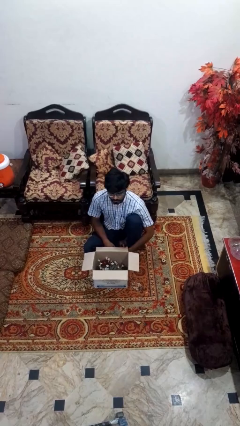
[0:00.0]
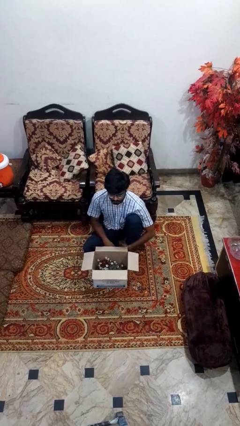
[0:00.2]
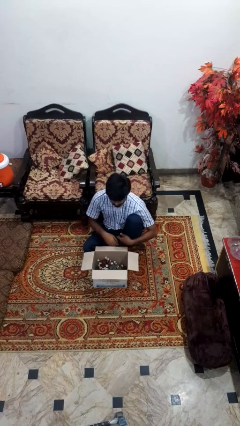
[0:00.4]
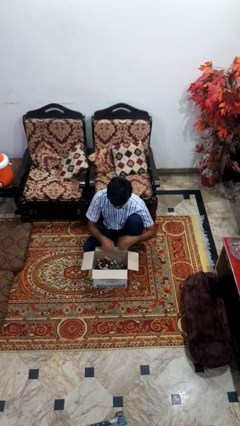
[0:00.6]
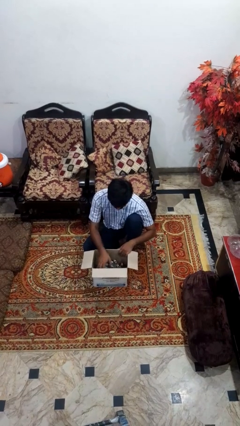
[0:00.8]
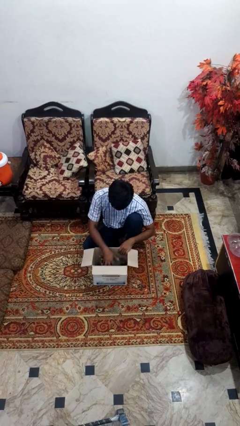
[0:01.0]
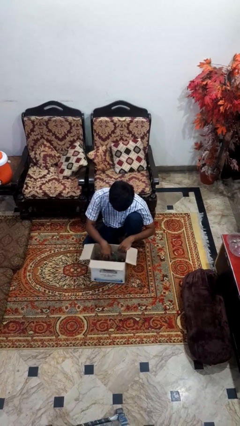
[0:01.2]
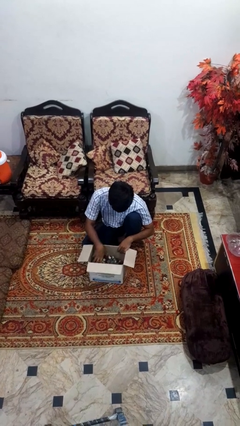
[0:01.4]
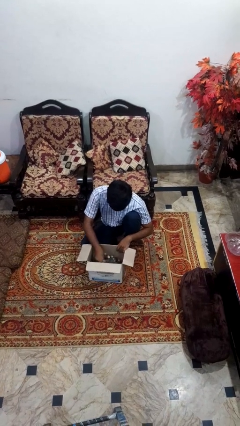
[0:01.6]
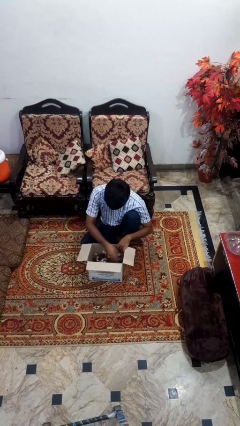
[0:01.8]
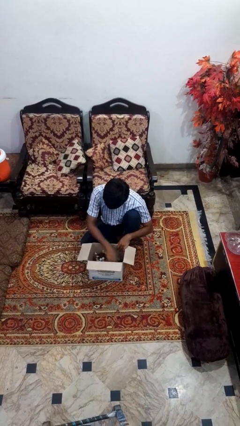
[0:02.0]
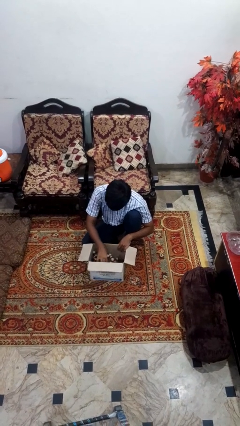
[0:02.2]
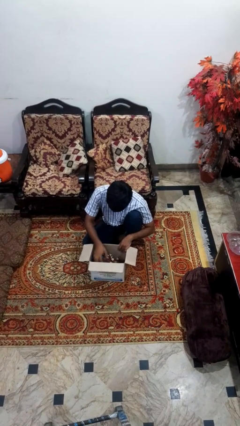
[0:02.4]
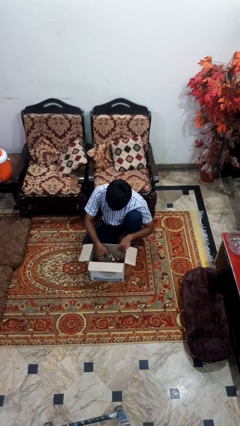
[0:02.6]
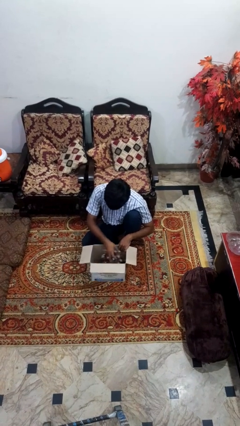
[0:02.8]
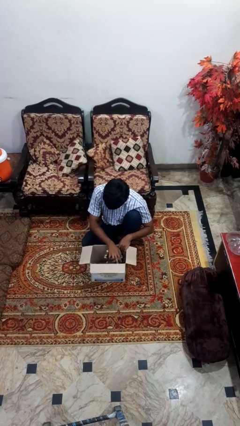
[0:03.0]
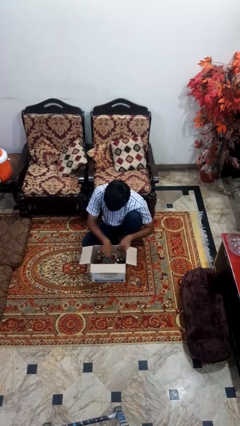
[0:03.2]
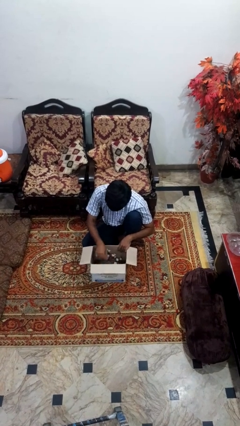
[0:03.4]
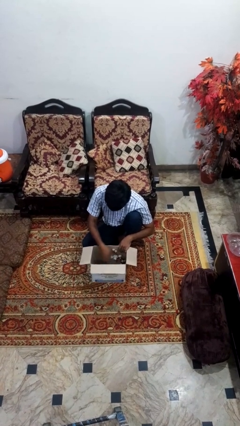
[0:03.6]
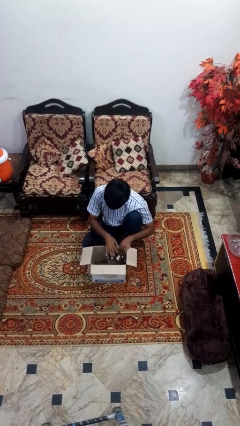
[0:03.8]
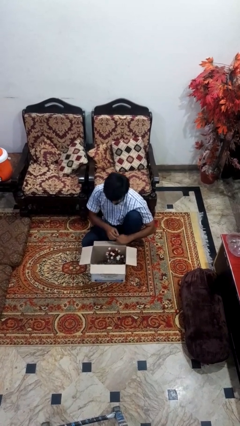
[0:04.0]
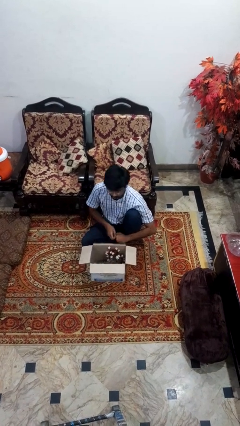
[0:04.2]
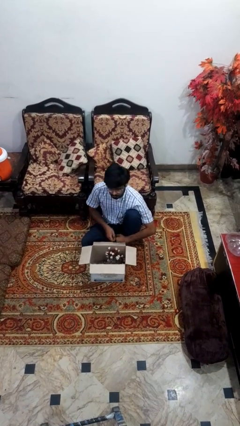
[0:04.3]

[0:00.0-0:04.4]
person searches in box

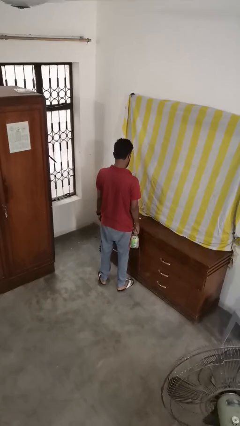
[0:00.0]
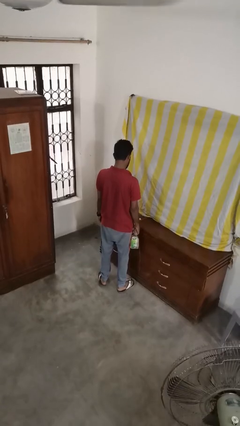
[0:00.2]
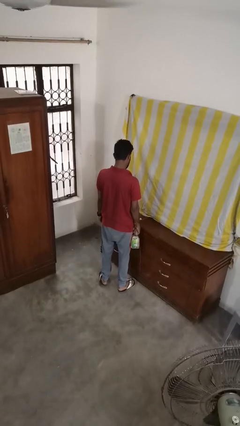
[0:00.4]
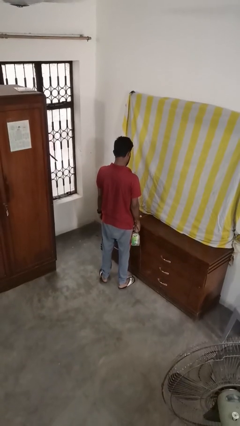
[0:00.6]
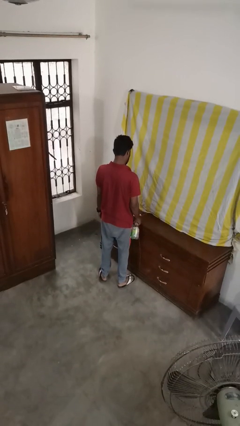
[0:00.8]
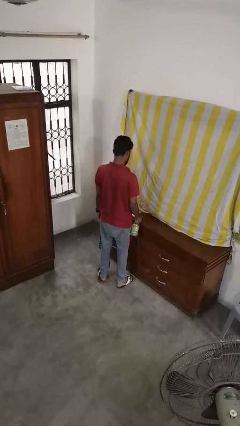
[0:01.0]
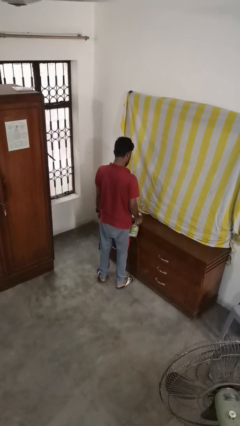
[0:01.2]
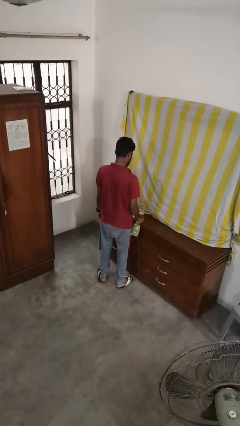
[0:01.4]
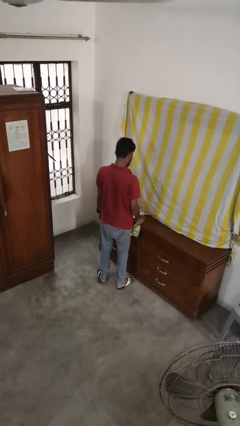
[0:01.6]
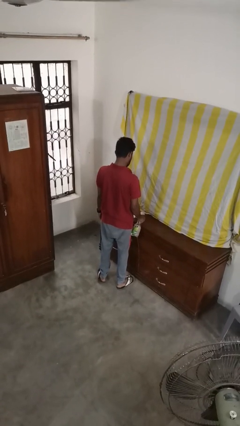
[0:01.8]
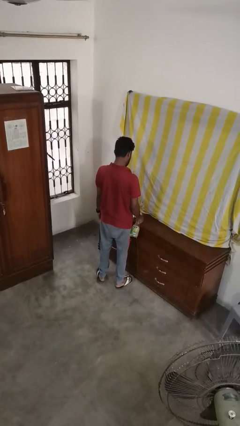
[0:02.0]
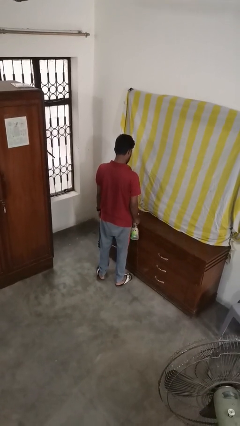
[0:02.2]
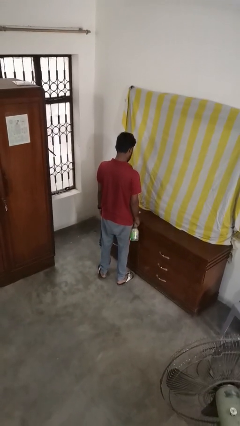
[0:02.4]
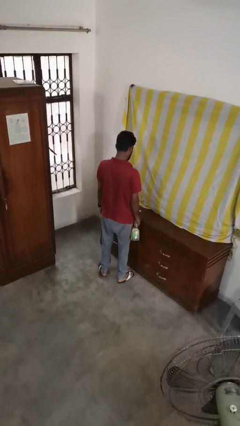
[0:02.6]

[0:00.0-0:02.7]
person sprays from bottle

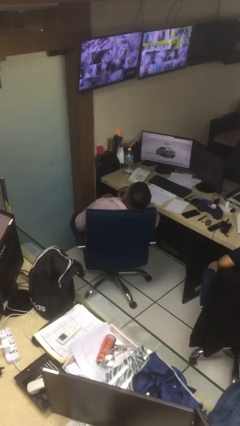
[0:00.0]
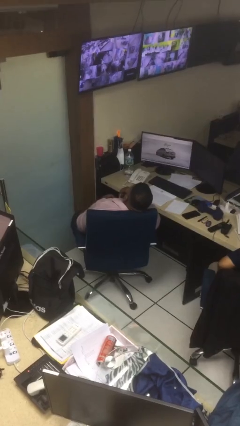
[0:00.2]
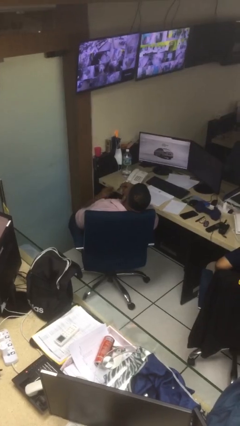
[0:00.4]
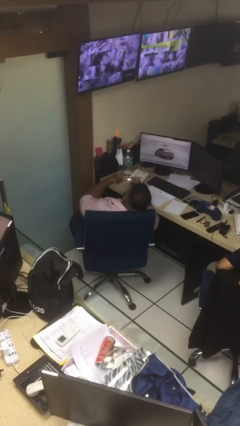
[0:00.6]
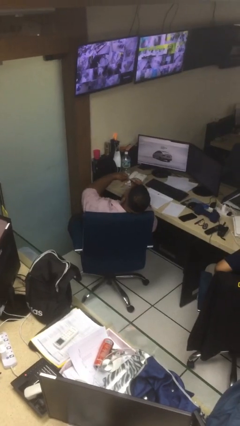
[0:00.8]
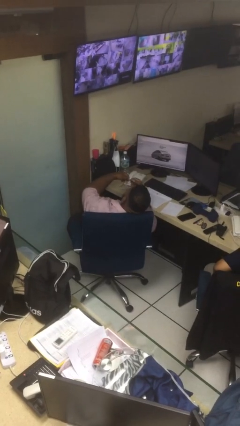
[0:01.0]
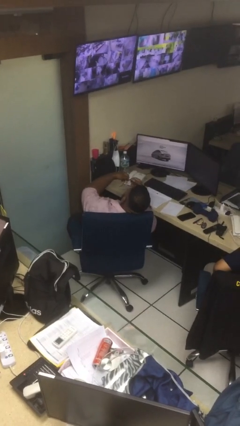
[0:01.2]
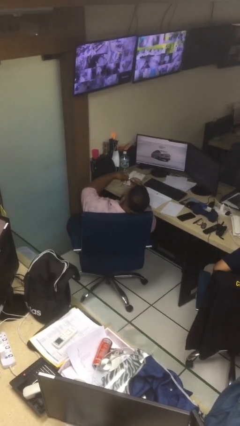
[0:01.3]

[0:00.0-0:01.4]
person clips fingernails

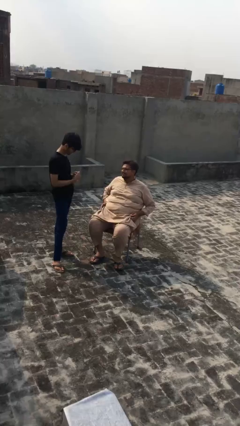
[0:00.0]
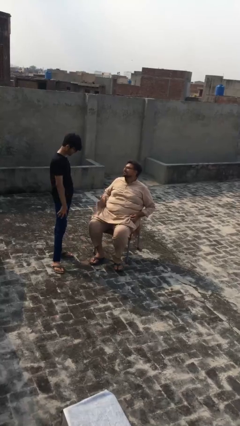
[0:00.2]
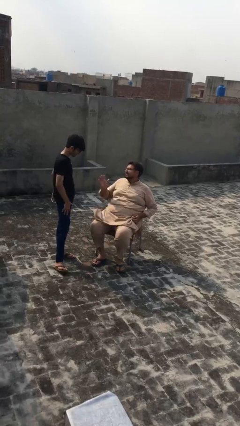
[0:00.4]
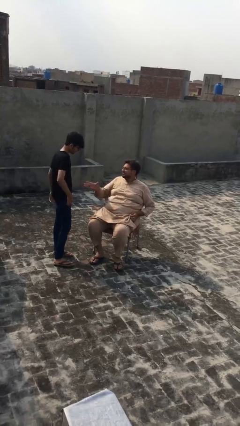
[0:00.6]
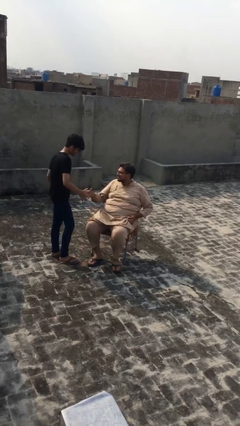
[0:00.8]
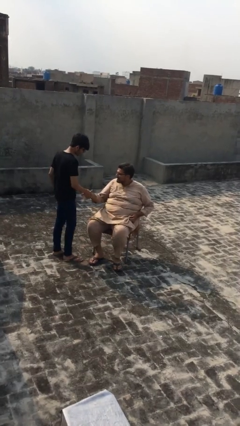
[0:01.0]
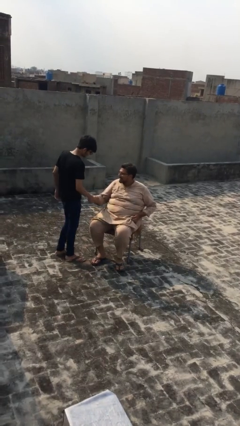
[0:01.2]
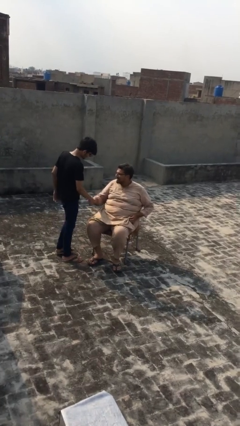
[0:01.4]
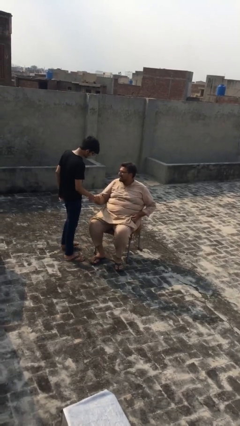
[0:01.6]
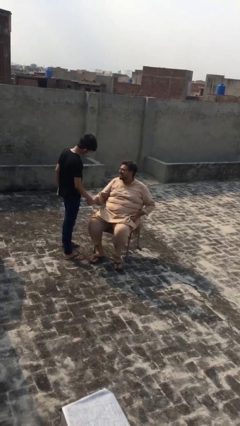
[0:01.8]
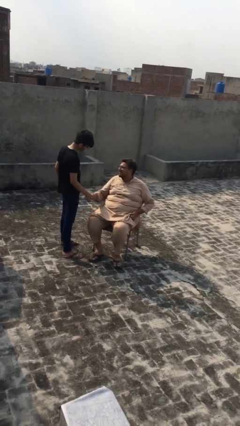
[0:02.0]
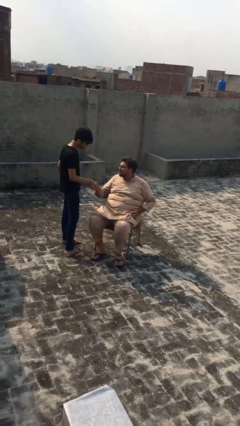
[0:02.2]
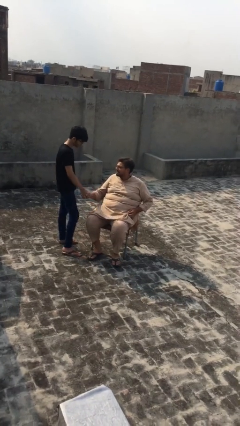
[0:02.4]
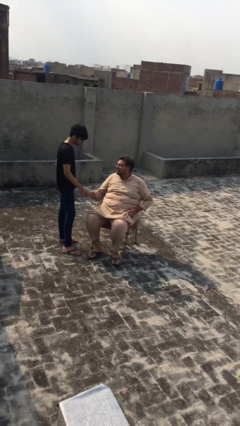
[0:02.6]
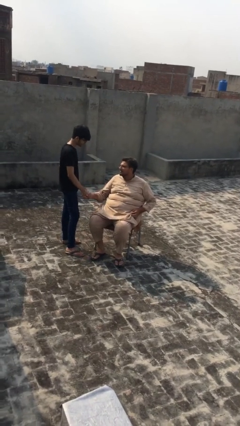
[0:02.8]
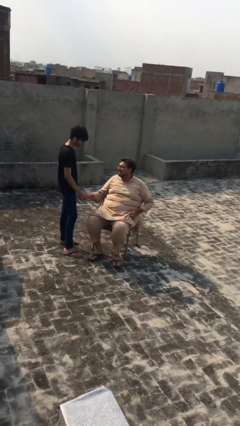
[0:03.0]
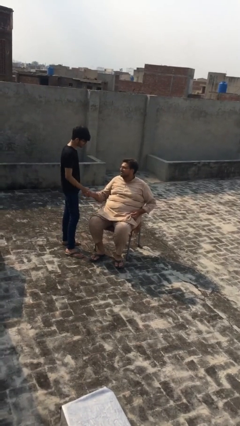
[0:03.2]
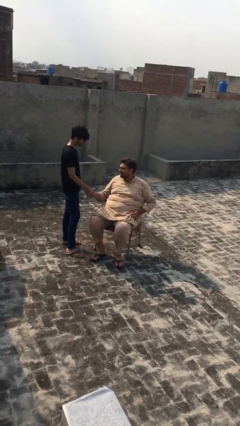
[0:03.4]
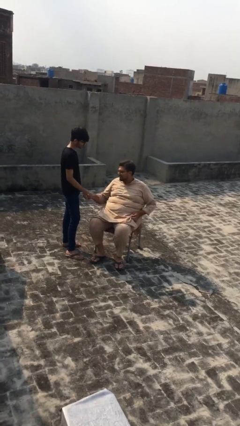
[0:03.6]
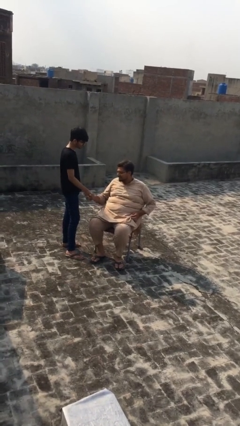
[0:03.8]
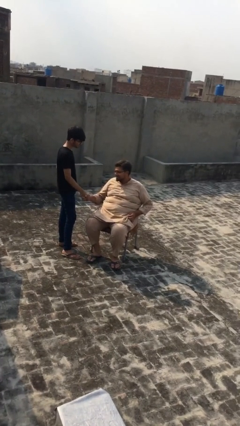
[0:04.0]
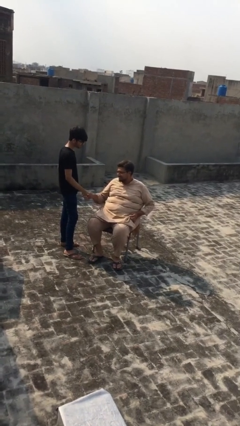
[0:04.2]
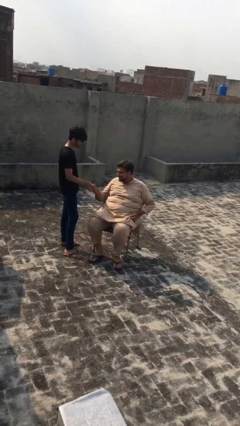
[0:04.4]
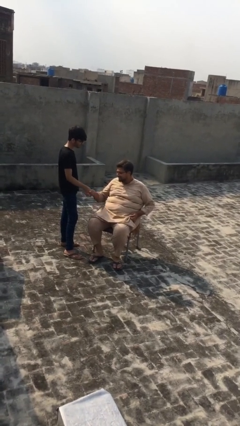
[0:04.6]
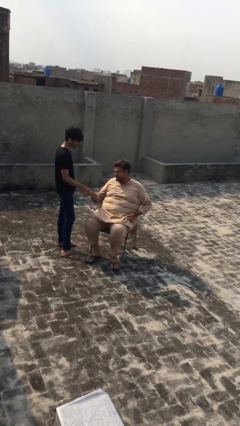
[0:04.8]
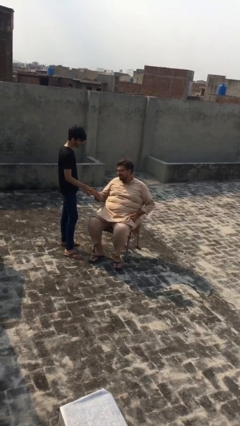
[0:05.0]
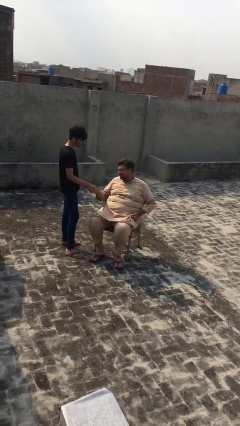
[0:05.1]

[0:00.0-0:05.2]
person shakes hand

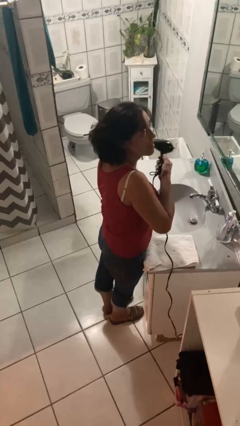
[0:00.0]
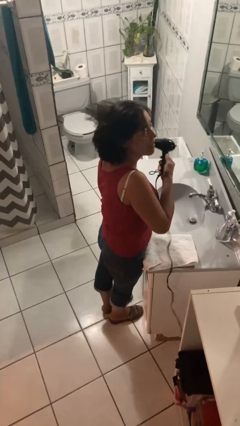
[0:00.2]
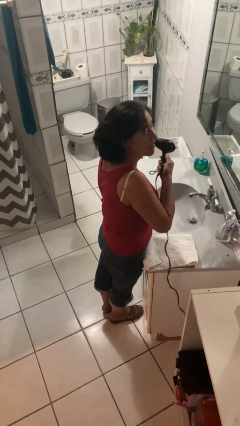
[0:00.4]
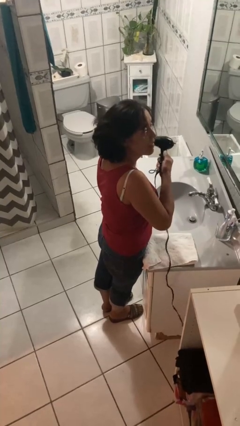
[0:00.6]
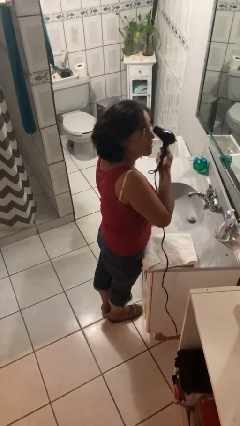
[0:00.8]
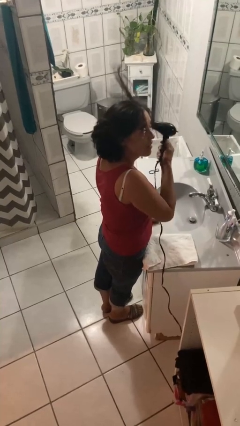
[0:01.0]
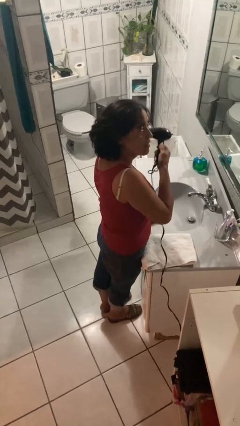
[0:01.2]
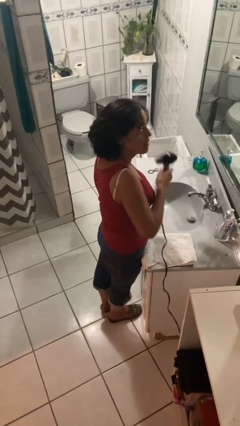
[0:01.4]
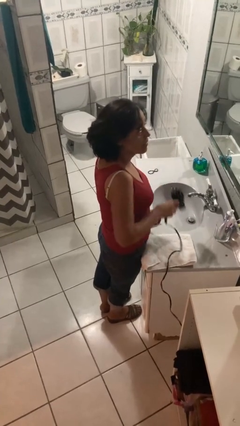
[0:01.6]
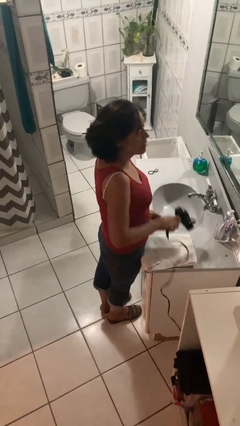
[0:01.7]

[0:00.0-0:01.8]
person dries hair with hairdryer

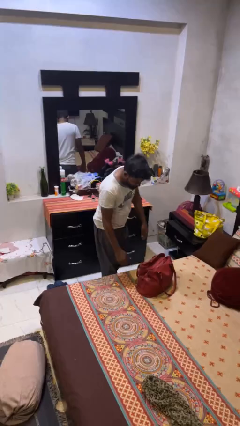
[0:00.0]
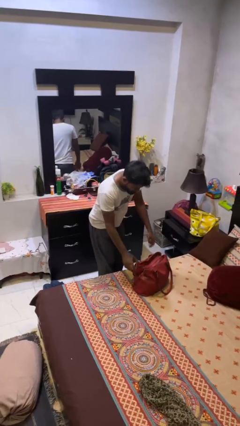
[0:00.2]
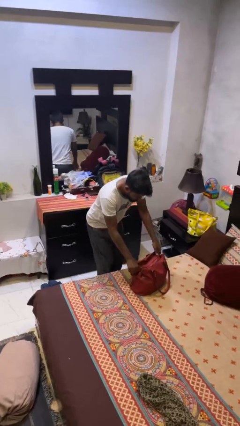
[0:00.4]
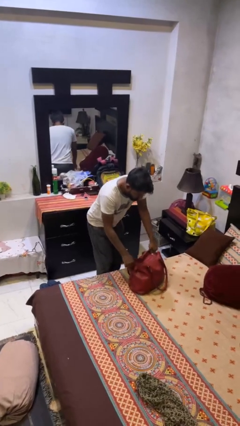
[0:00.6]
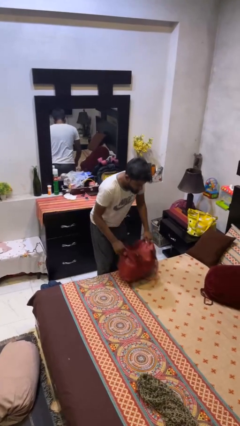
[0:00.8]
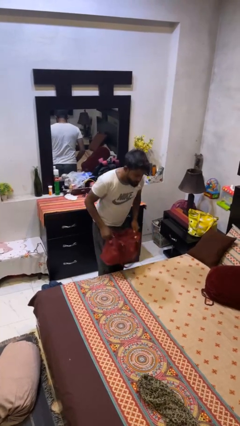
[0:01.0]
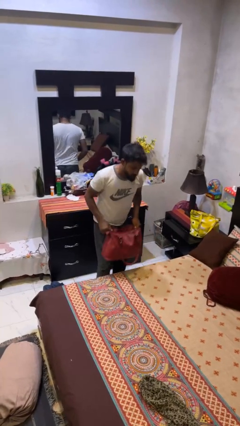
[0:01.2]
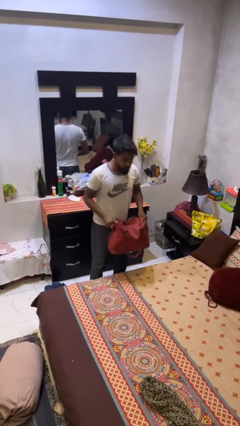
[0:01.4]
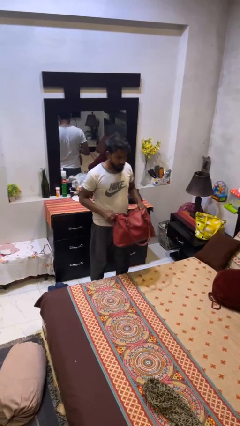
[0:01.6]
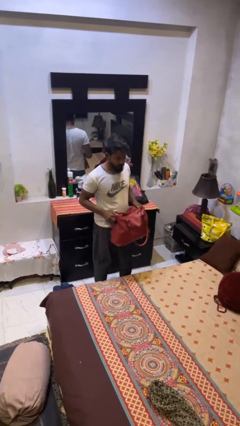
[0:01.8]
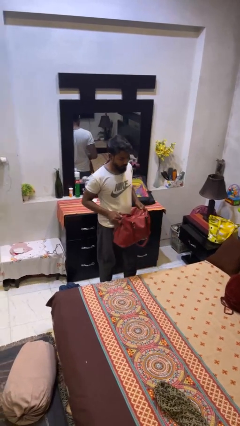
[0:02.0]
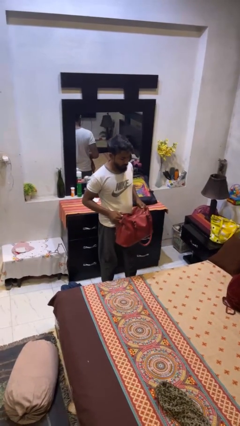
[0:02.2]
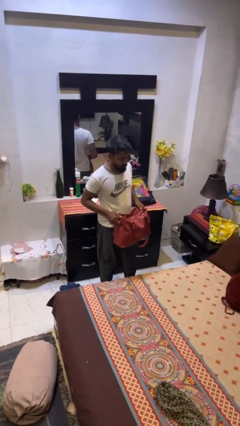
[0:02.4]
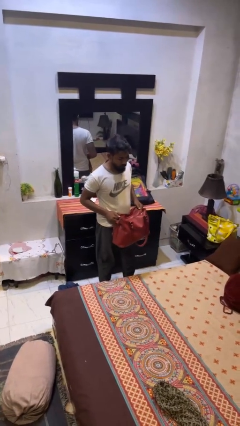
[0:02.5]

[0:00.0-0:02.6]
person picks up object from bed
